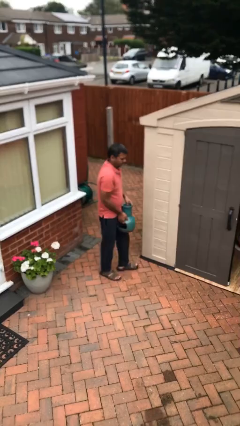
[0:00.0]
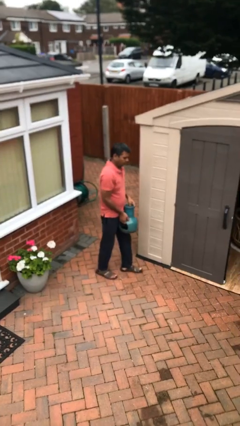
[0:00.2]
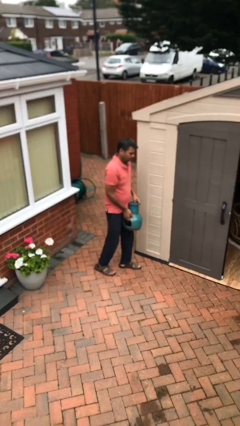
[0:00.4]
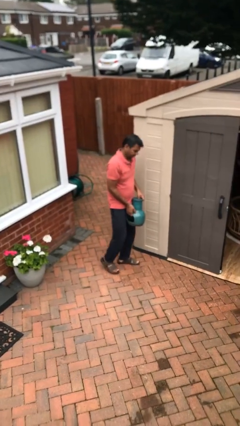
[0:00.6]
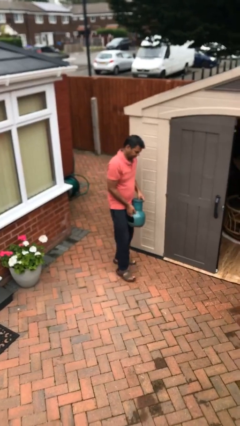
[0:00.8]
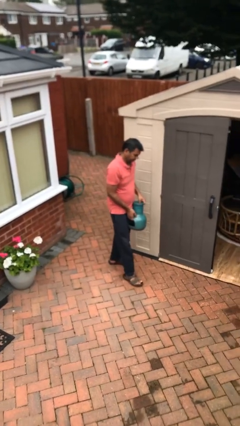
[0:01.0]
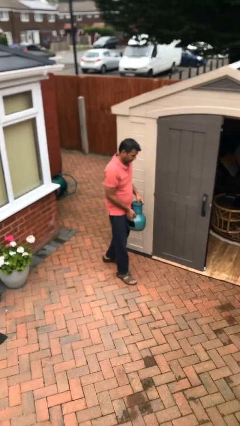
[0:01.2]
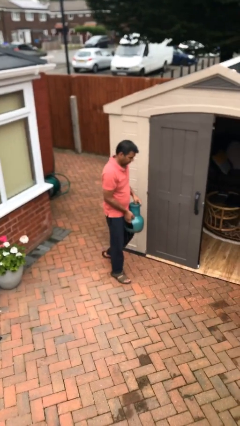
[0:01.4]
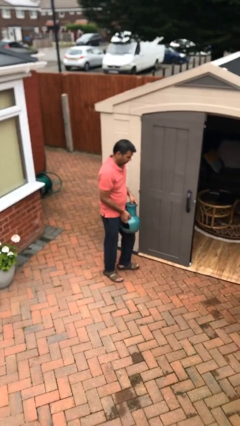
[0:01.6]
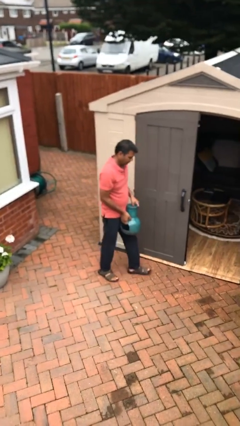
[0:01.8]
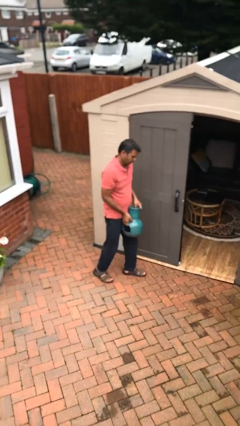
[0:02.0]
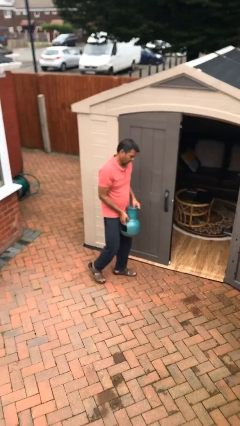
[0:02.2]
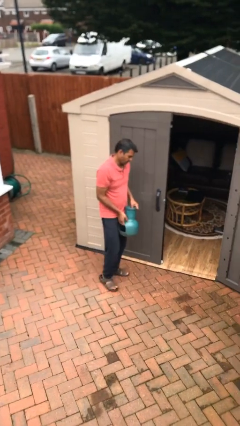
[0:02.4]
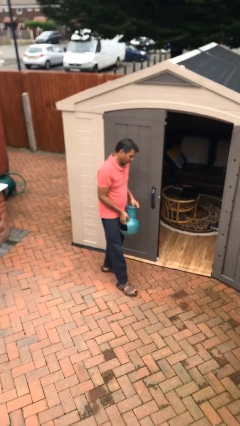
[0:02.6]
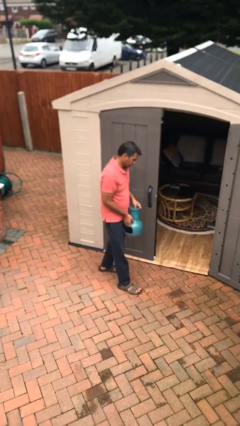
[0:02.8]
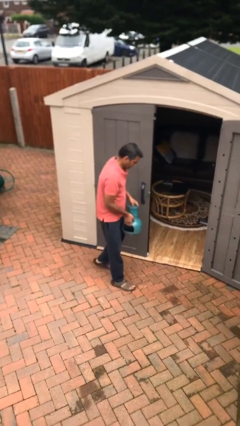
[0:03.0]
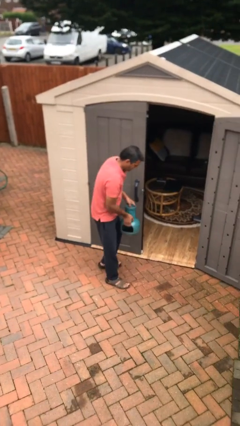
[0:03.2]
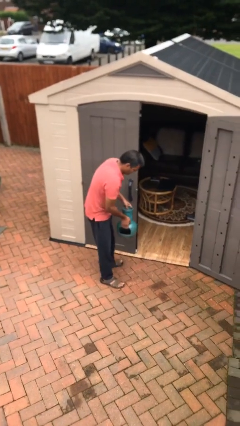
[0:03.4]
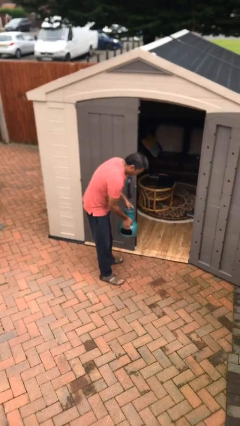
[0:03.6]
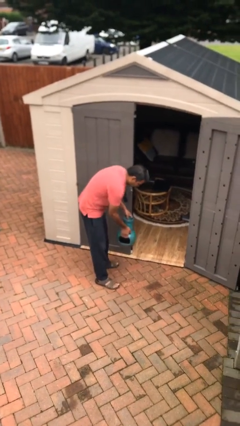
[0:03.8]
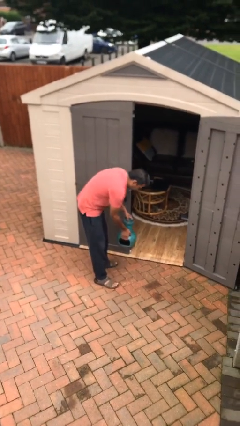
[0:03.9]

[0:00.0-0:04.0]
person carries heavy object

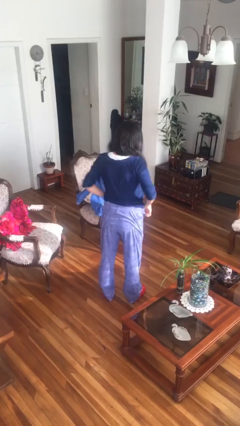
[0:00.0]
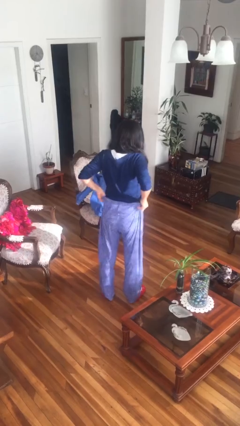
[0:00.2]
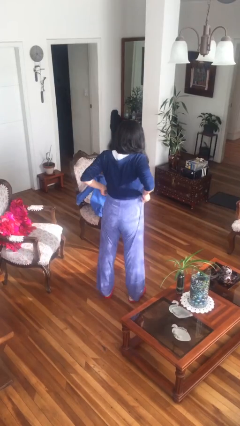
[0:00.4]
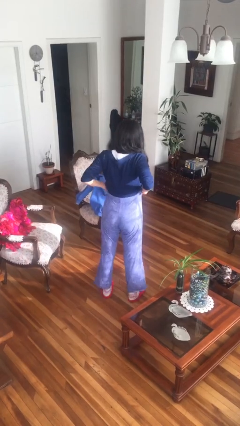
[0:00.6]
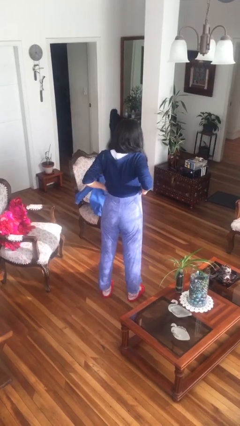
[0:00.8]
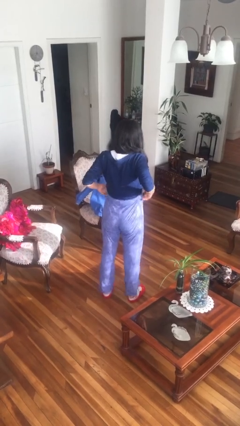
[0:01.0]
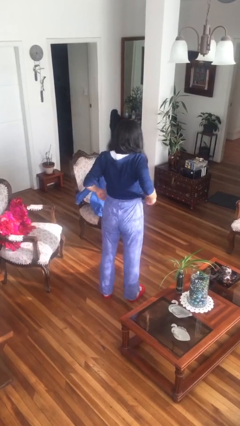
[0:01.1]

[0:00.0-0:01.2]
person hikes up pants

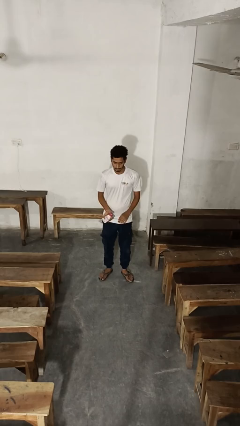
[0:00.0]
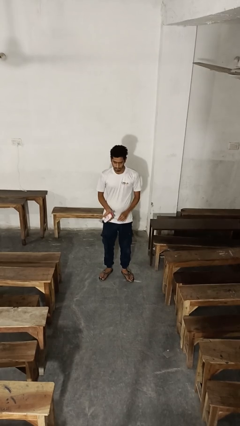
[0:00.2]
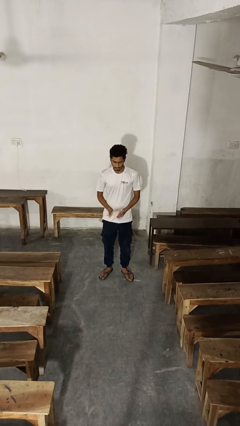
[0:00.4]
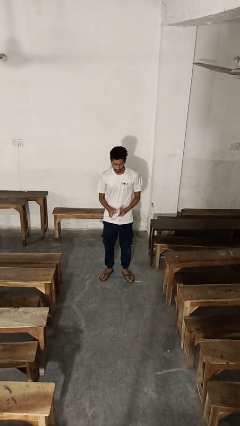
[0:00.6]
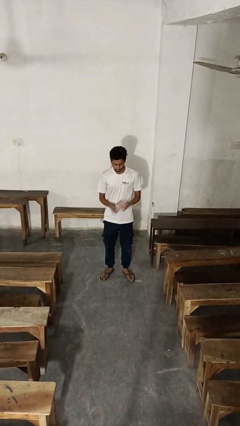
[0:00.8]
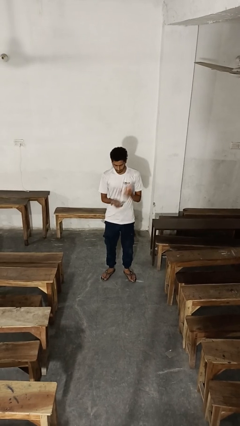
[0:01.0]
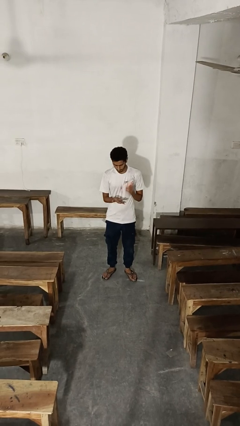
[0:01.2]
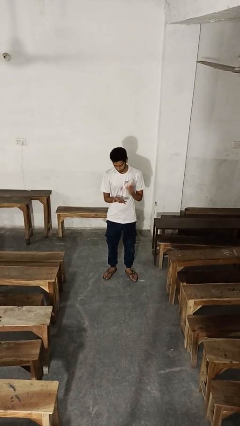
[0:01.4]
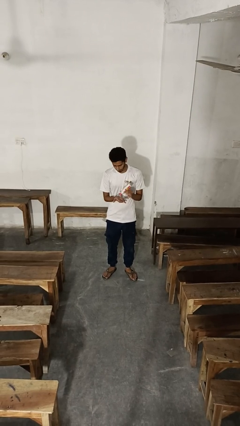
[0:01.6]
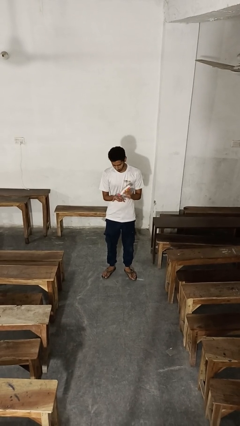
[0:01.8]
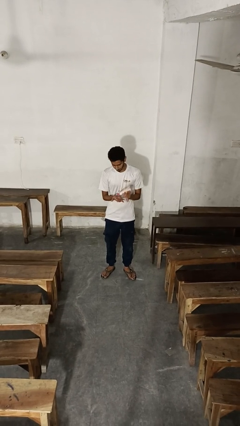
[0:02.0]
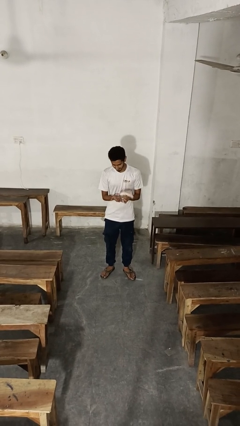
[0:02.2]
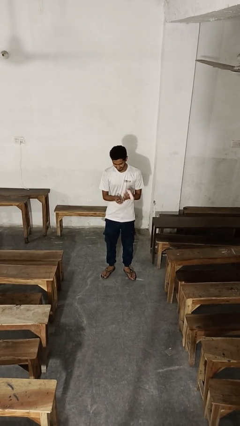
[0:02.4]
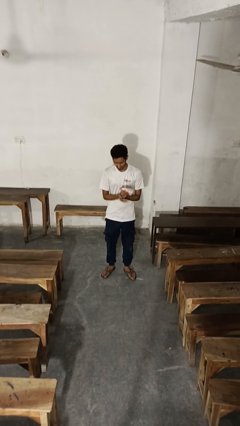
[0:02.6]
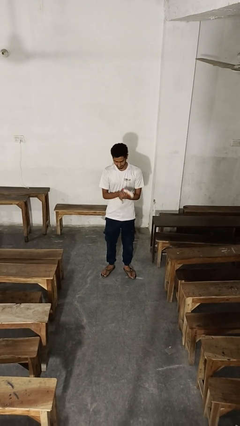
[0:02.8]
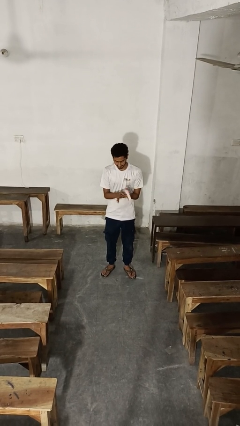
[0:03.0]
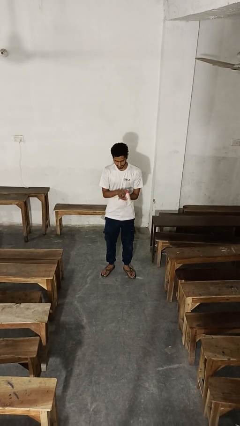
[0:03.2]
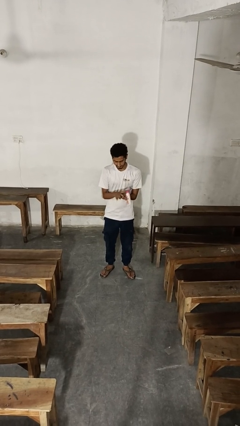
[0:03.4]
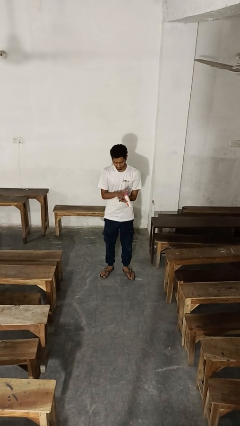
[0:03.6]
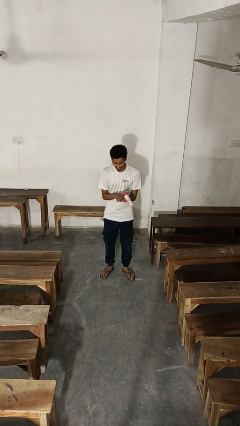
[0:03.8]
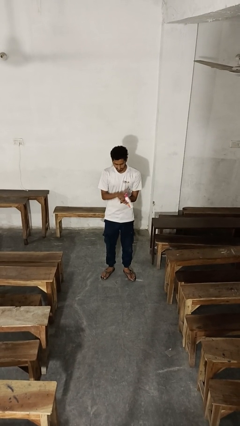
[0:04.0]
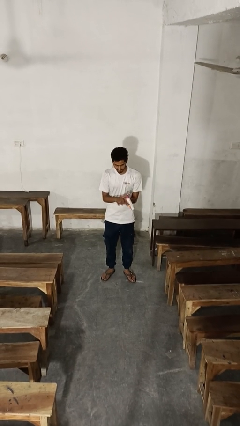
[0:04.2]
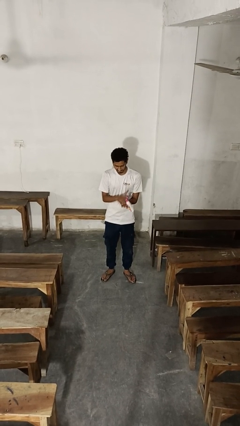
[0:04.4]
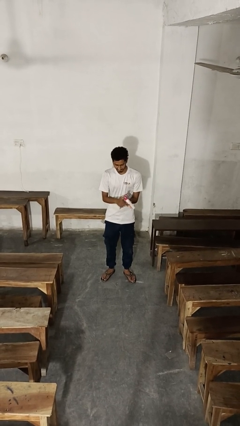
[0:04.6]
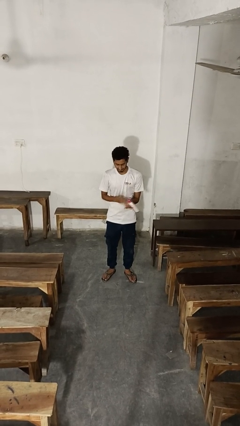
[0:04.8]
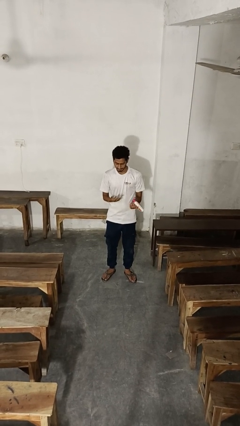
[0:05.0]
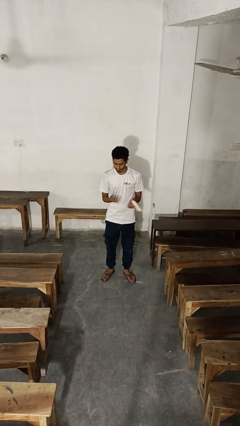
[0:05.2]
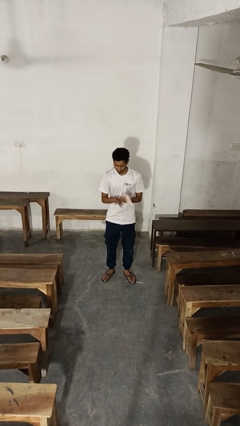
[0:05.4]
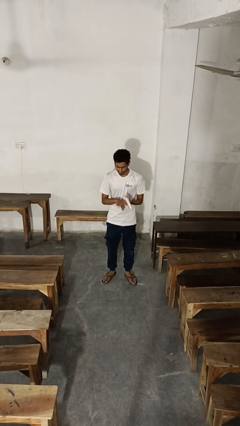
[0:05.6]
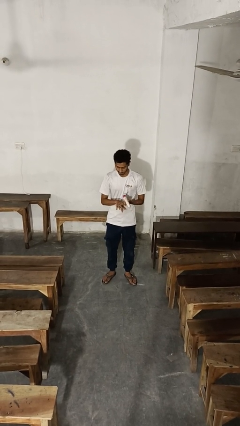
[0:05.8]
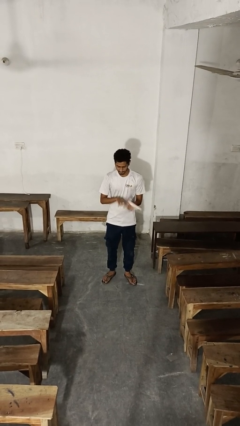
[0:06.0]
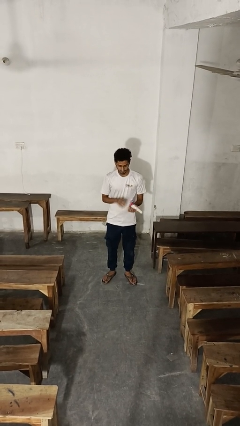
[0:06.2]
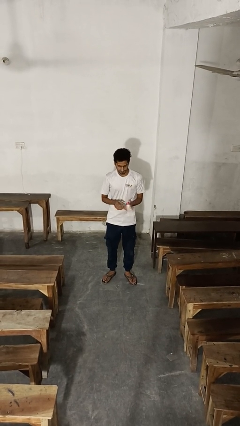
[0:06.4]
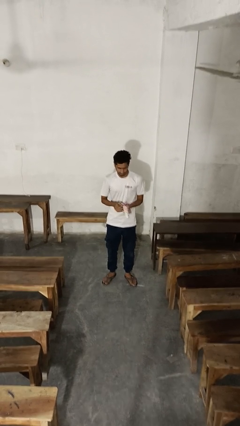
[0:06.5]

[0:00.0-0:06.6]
person applies sunscreen

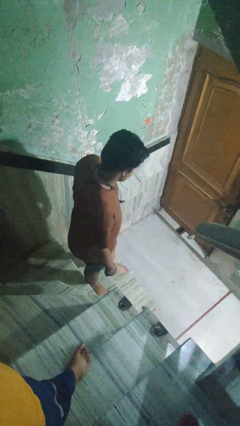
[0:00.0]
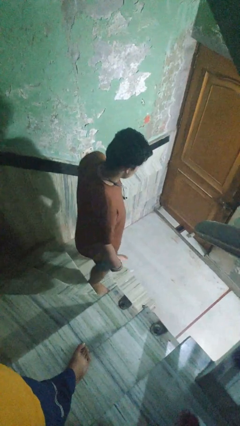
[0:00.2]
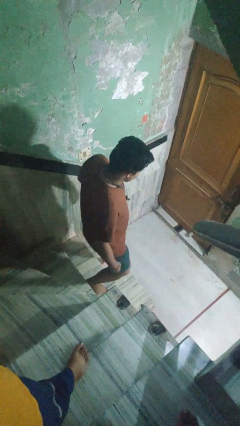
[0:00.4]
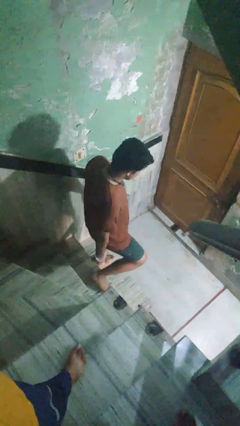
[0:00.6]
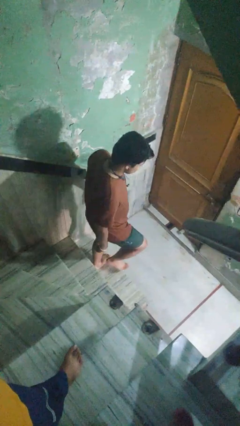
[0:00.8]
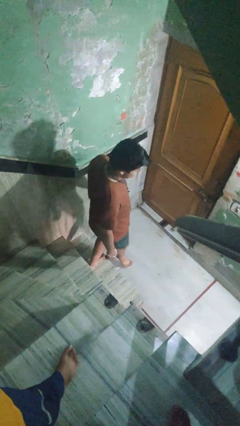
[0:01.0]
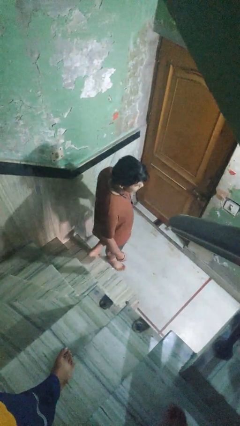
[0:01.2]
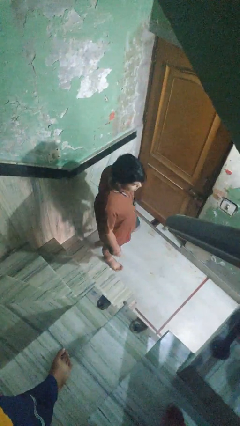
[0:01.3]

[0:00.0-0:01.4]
person climbs down stairs

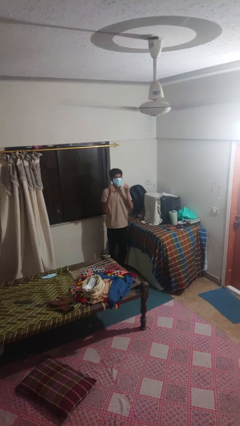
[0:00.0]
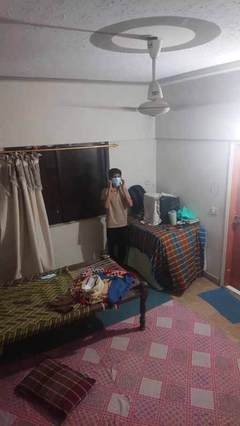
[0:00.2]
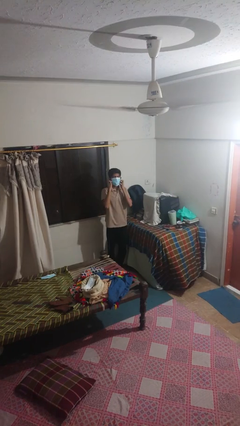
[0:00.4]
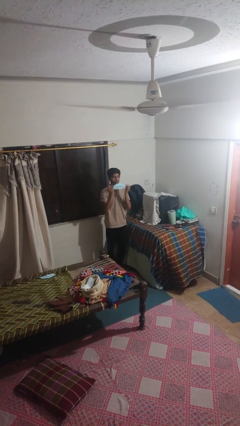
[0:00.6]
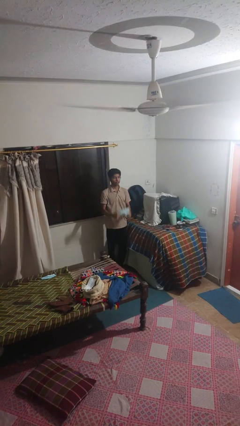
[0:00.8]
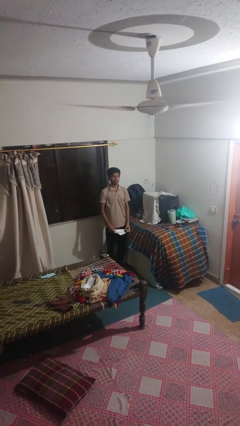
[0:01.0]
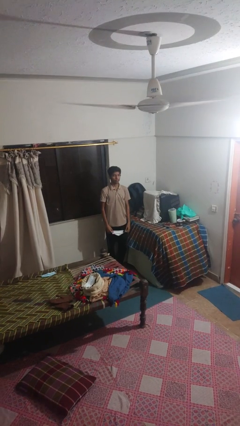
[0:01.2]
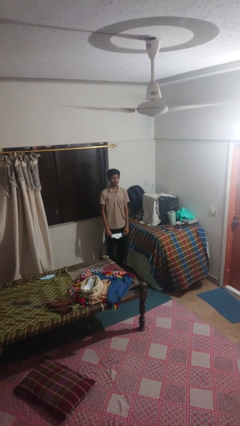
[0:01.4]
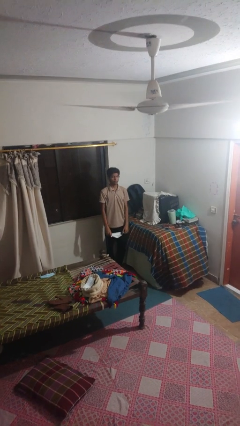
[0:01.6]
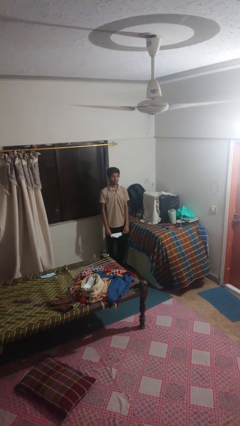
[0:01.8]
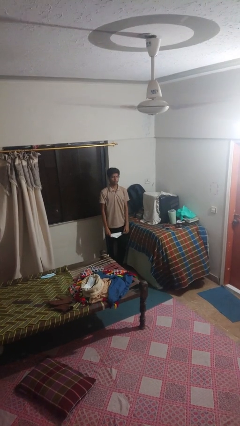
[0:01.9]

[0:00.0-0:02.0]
person takes off facemask

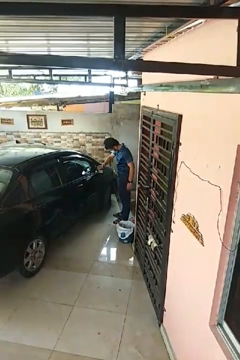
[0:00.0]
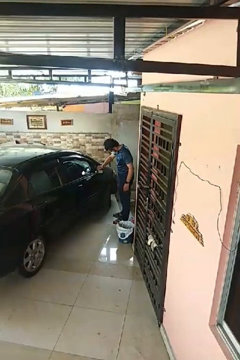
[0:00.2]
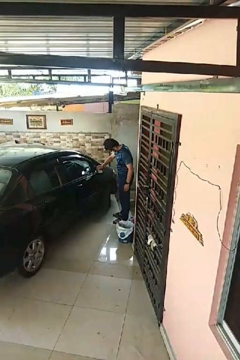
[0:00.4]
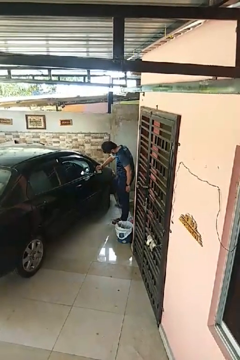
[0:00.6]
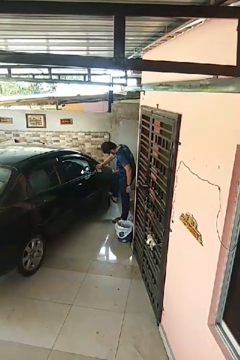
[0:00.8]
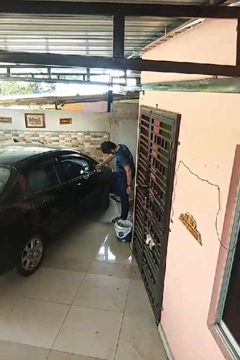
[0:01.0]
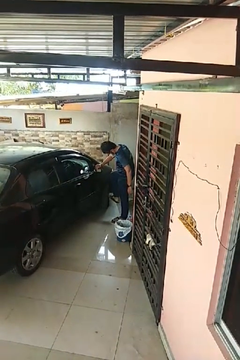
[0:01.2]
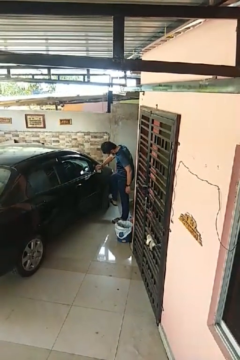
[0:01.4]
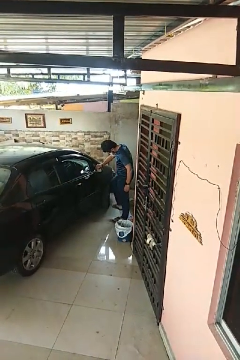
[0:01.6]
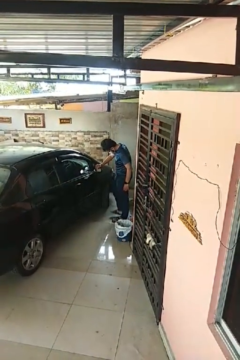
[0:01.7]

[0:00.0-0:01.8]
person kicks car tires

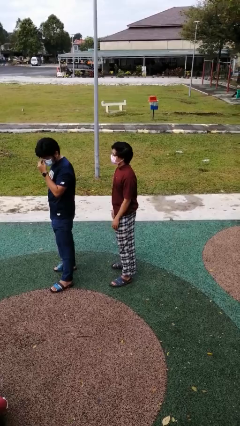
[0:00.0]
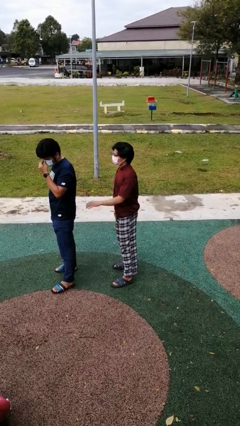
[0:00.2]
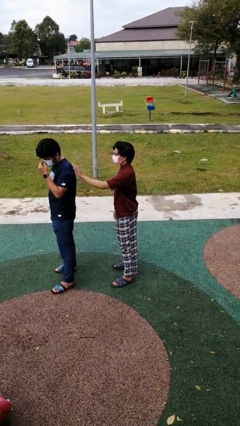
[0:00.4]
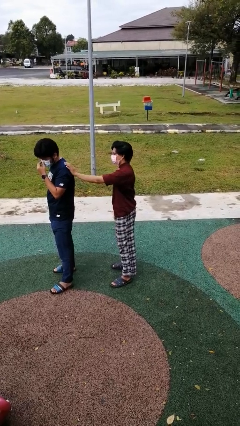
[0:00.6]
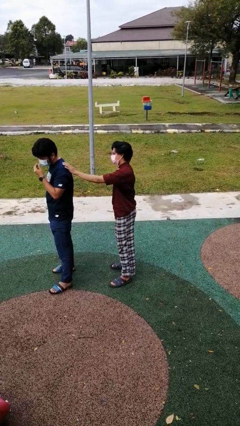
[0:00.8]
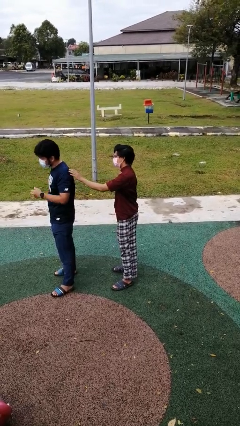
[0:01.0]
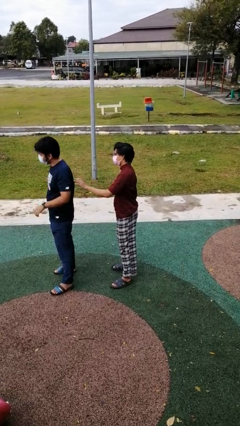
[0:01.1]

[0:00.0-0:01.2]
person touches back of person
